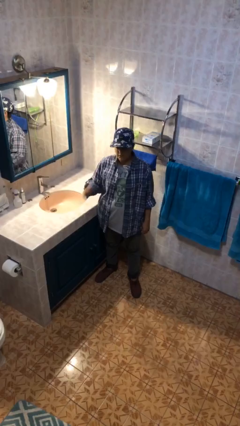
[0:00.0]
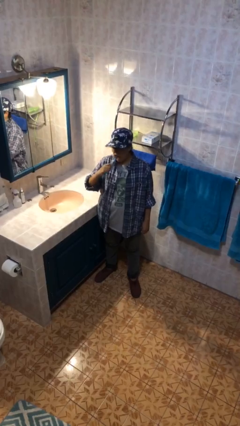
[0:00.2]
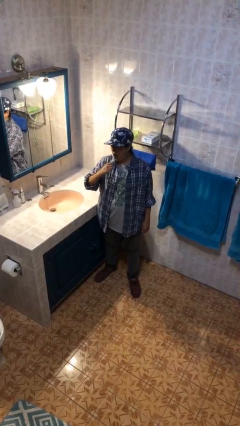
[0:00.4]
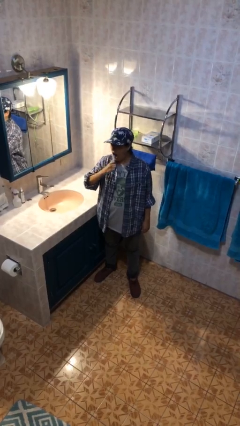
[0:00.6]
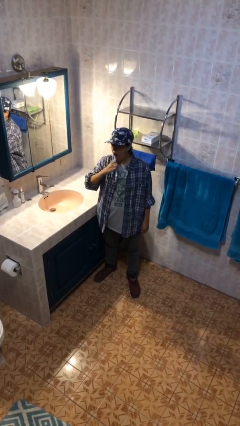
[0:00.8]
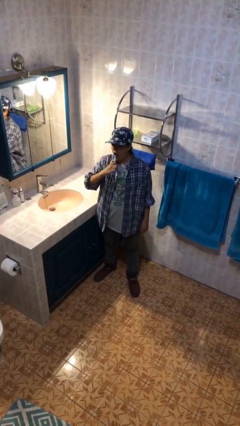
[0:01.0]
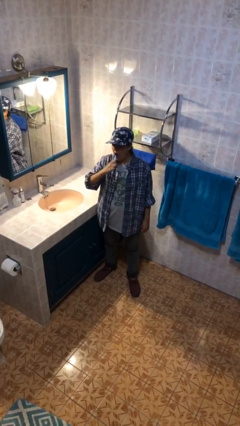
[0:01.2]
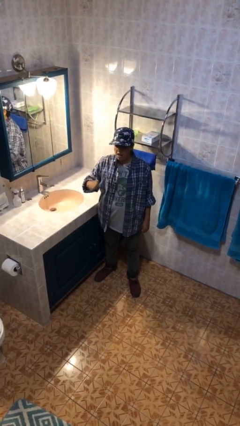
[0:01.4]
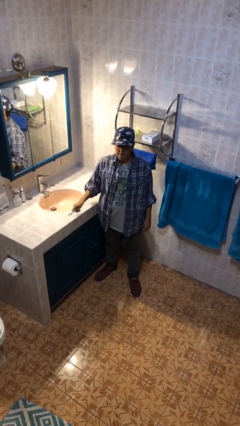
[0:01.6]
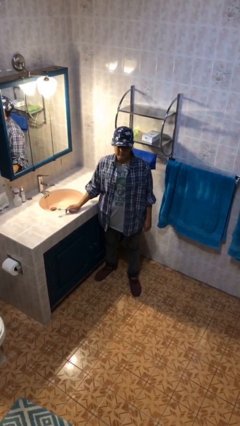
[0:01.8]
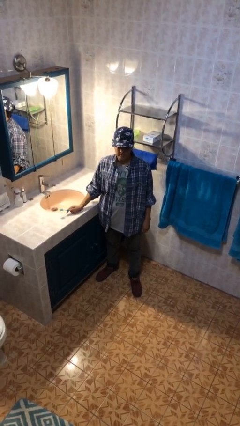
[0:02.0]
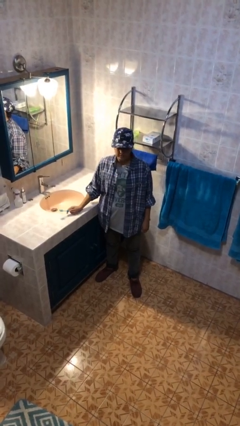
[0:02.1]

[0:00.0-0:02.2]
person brushes teeth

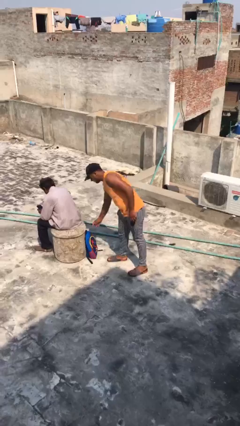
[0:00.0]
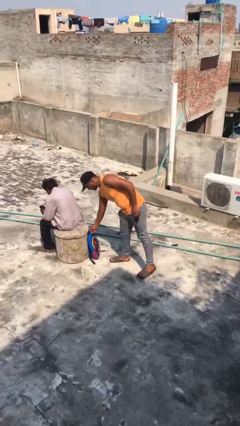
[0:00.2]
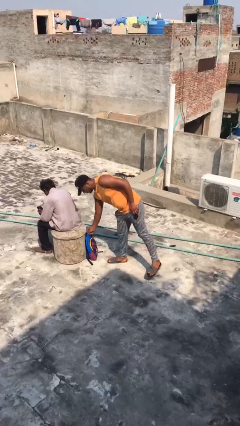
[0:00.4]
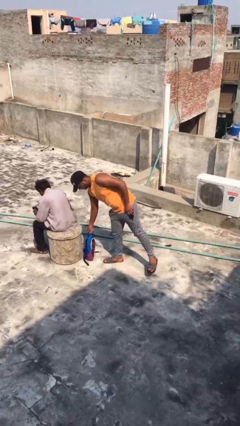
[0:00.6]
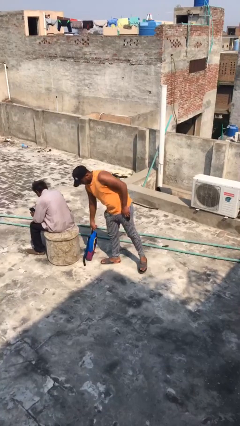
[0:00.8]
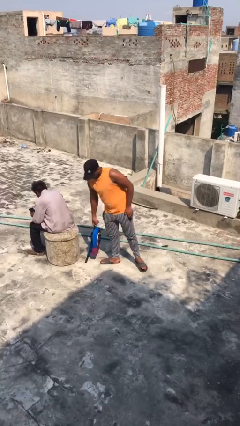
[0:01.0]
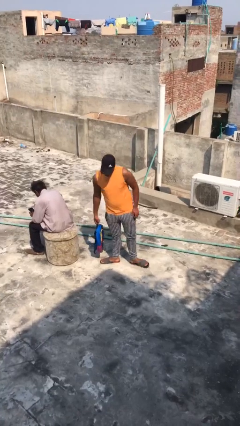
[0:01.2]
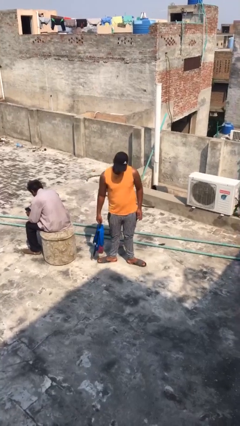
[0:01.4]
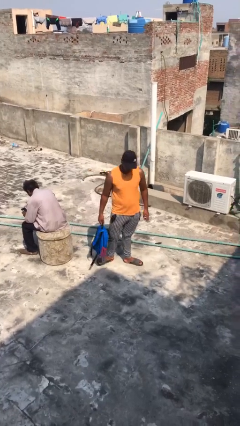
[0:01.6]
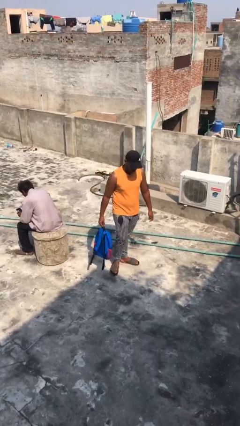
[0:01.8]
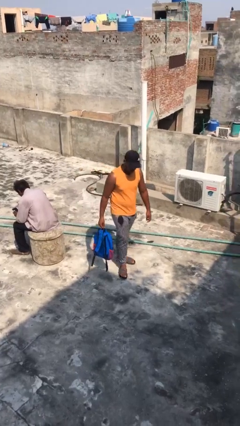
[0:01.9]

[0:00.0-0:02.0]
person steals object from person

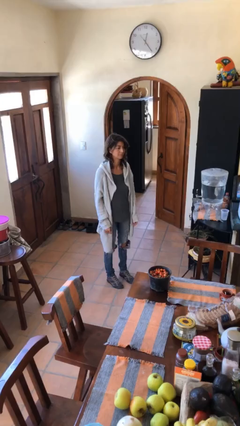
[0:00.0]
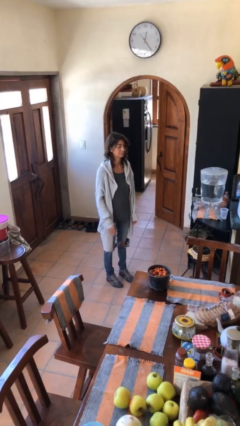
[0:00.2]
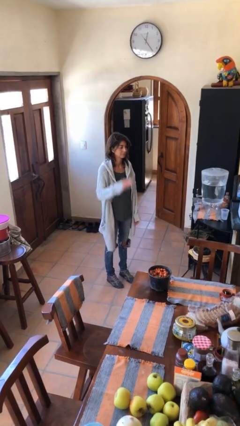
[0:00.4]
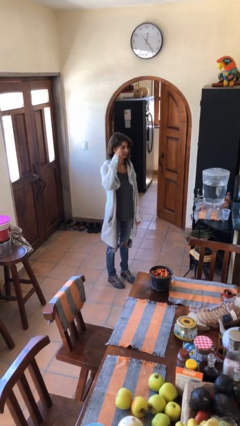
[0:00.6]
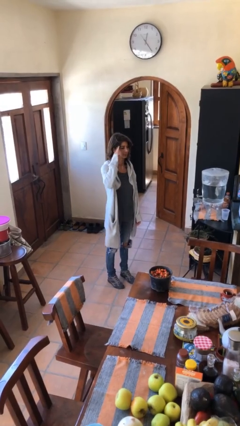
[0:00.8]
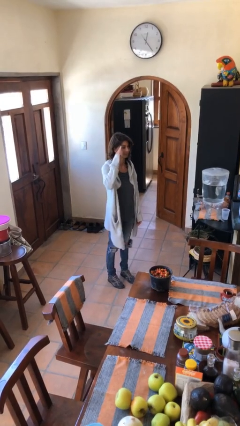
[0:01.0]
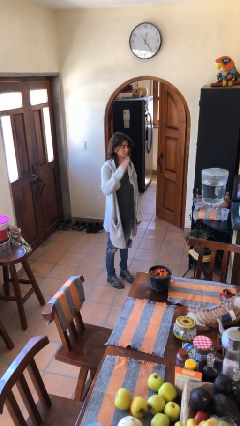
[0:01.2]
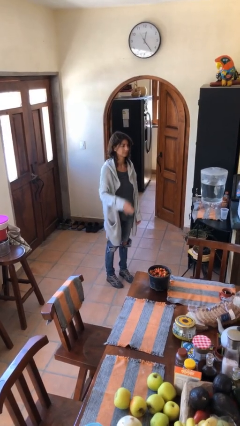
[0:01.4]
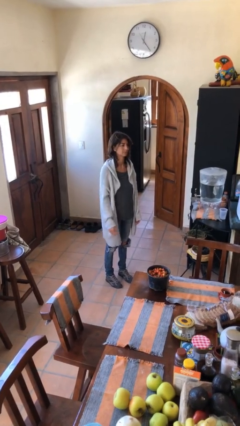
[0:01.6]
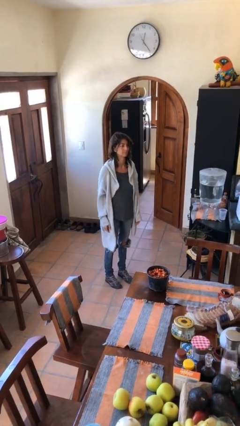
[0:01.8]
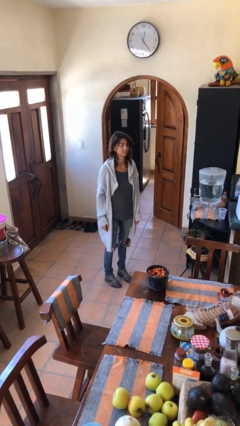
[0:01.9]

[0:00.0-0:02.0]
person salutes

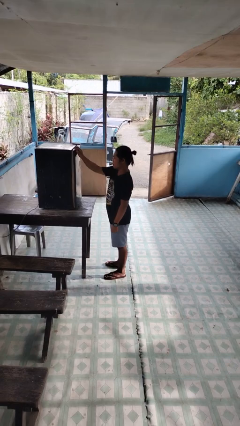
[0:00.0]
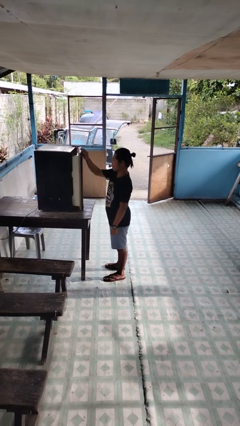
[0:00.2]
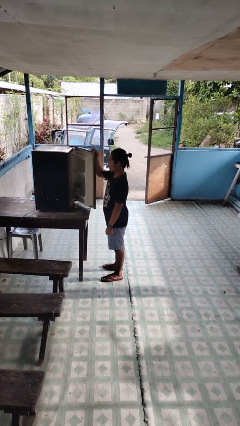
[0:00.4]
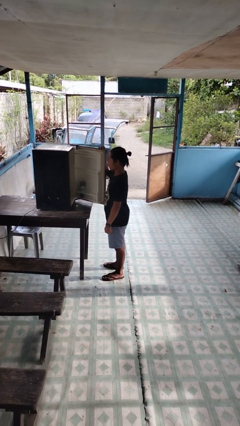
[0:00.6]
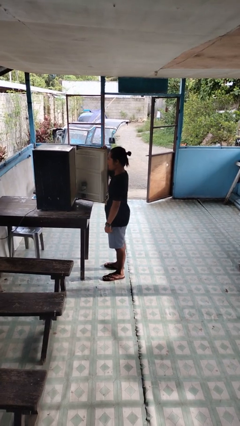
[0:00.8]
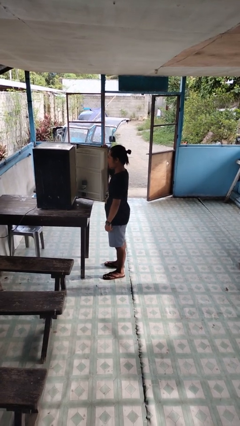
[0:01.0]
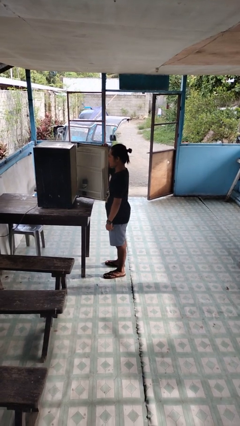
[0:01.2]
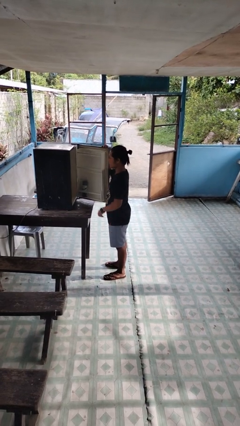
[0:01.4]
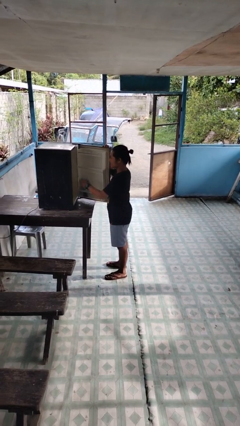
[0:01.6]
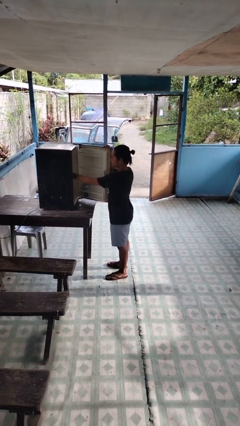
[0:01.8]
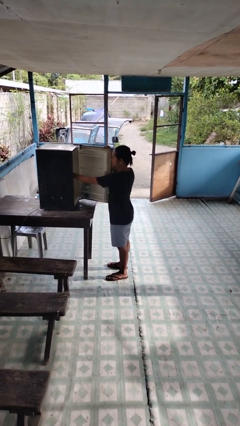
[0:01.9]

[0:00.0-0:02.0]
person opens refrigerator

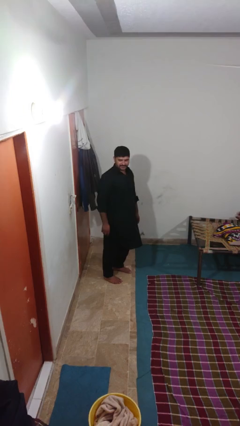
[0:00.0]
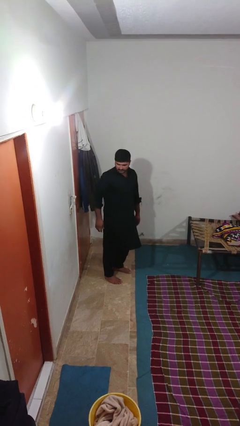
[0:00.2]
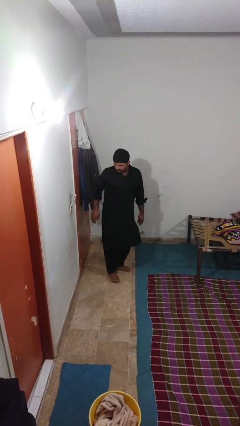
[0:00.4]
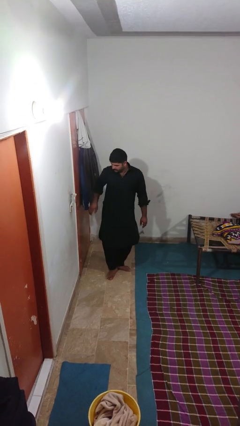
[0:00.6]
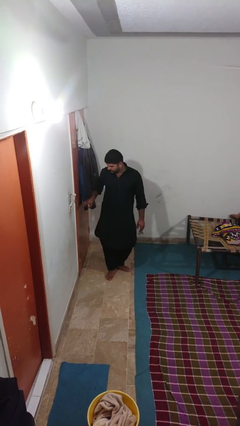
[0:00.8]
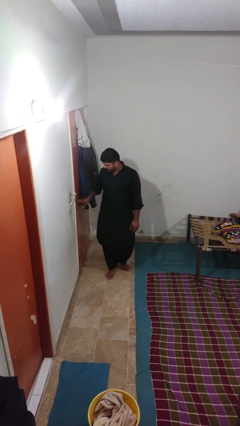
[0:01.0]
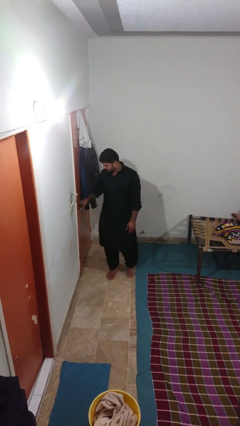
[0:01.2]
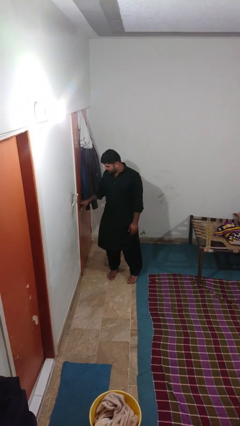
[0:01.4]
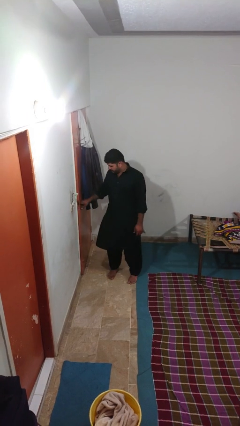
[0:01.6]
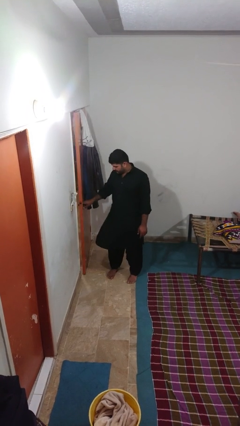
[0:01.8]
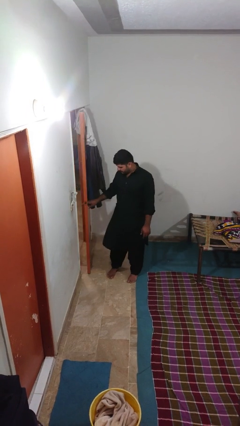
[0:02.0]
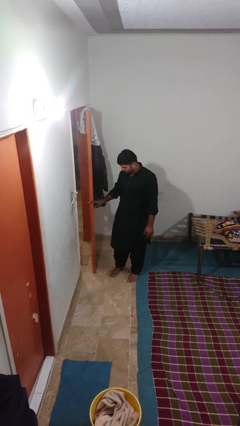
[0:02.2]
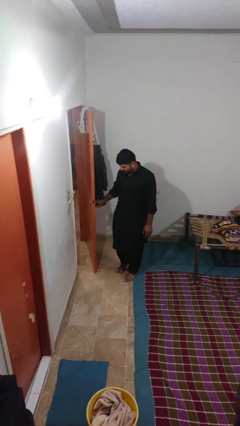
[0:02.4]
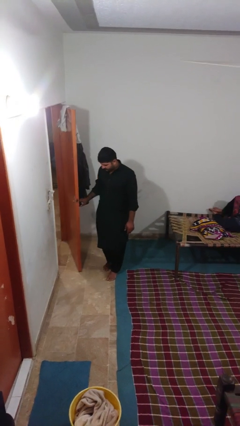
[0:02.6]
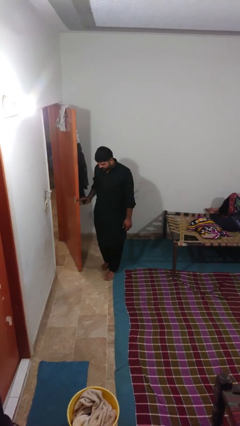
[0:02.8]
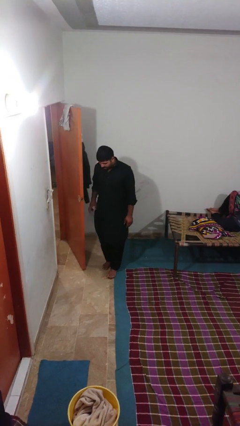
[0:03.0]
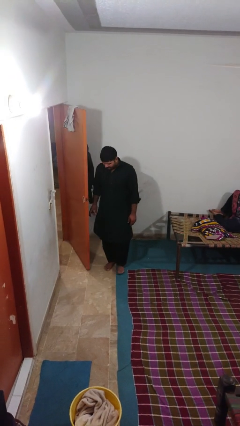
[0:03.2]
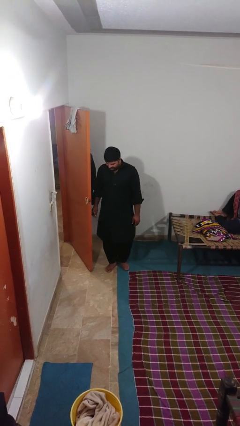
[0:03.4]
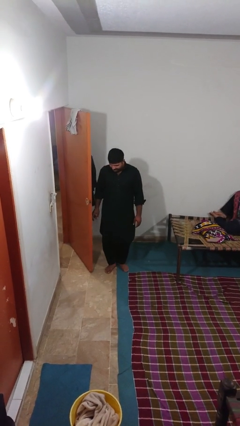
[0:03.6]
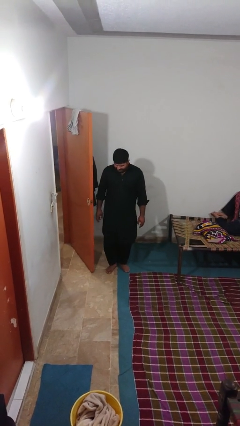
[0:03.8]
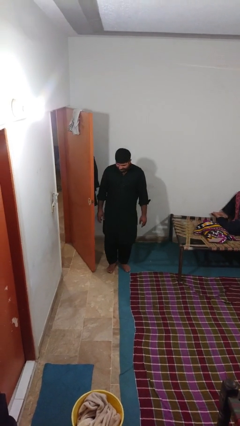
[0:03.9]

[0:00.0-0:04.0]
person opens facility door

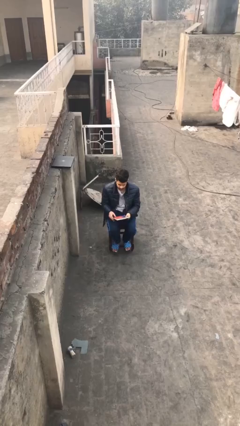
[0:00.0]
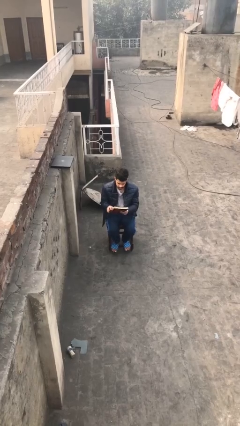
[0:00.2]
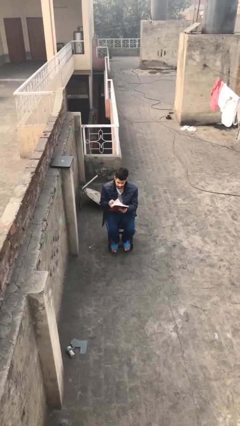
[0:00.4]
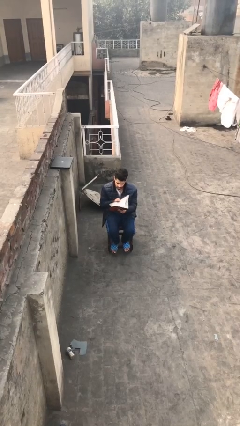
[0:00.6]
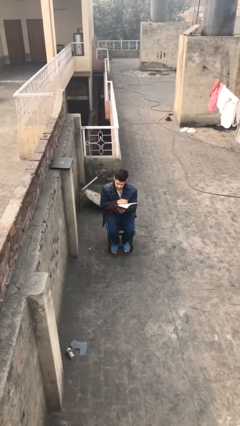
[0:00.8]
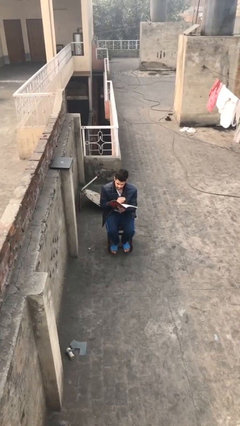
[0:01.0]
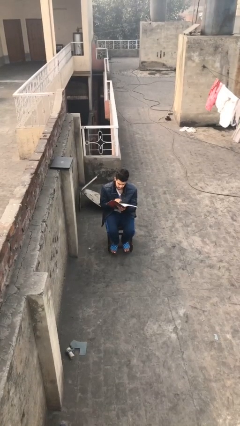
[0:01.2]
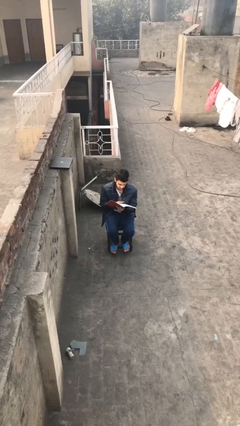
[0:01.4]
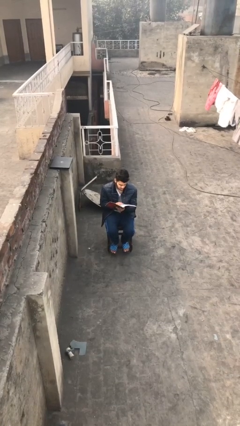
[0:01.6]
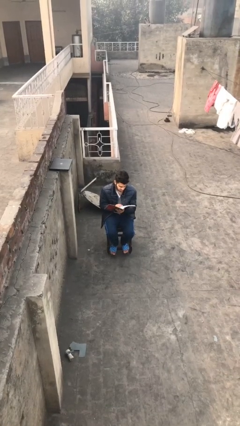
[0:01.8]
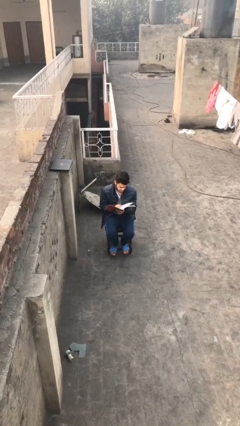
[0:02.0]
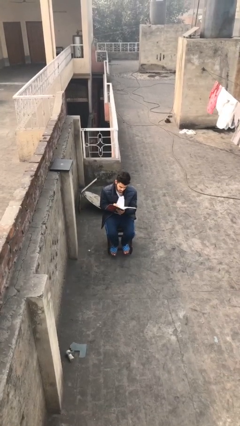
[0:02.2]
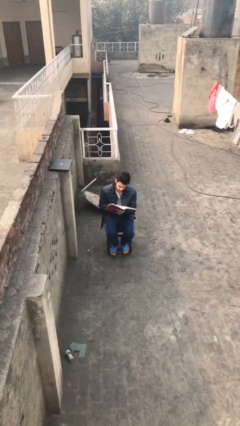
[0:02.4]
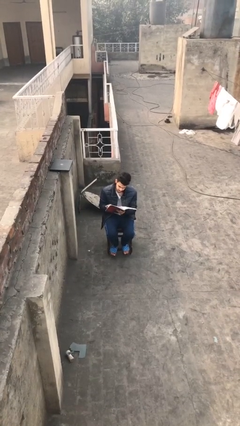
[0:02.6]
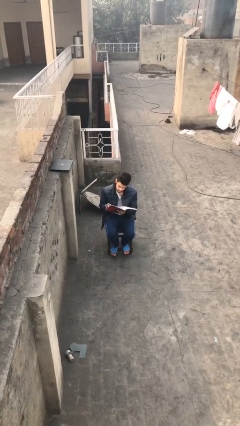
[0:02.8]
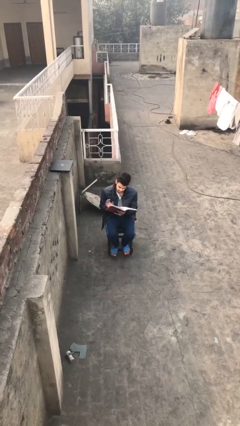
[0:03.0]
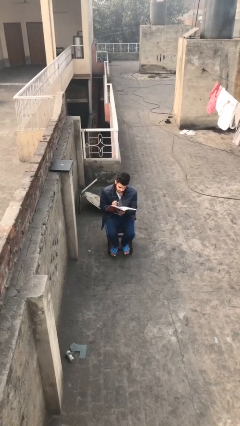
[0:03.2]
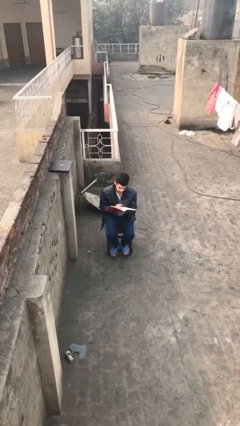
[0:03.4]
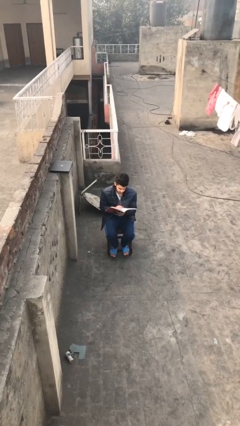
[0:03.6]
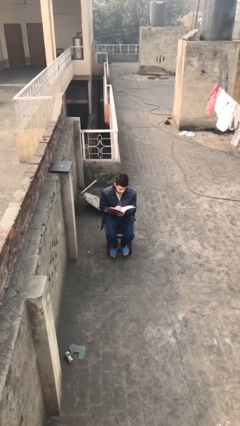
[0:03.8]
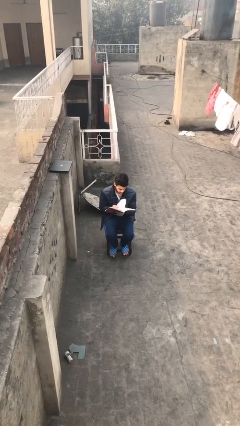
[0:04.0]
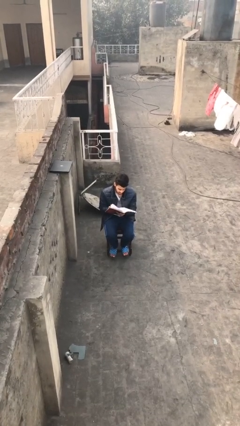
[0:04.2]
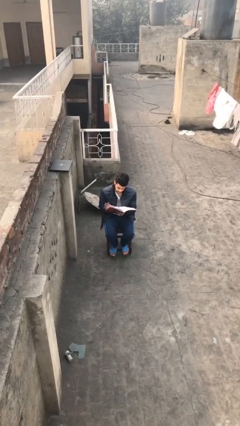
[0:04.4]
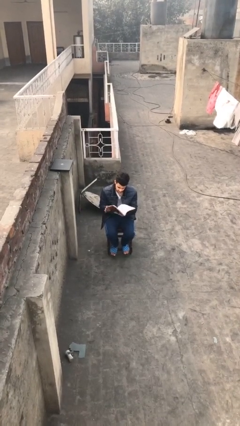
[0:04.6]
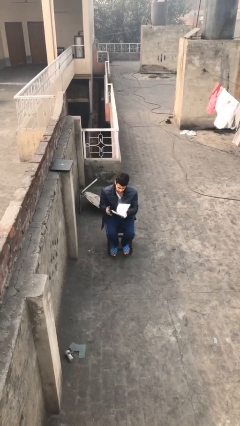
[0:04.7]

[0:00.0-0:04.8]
person reads document
